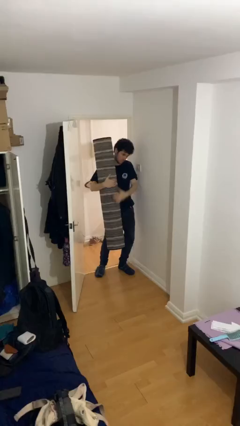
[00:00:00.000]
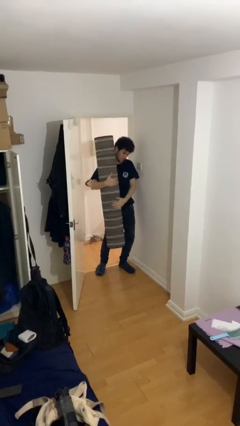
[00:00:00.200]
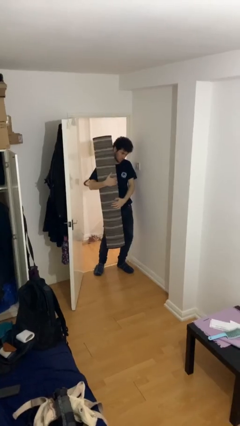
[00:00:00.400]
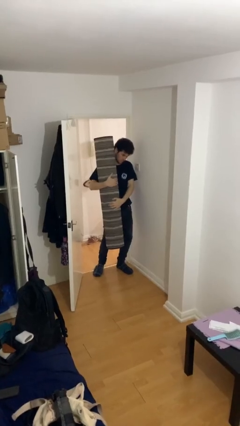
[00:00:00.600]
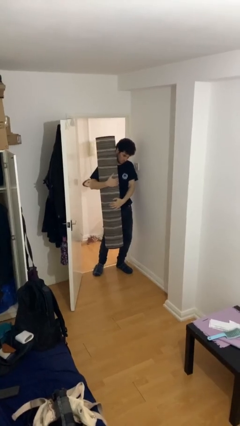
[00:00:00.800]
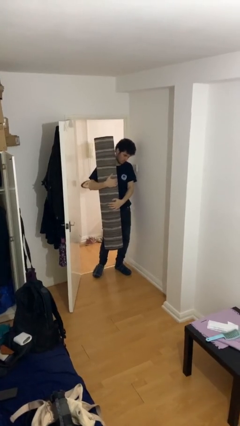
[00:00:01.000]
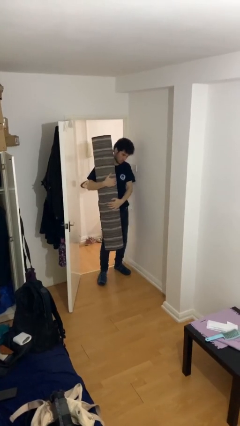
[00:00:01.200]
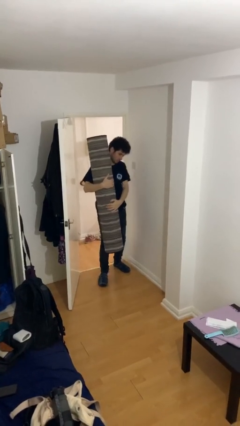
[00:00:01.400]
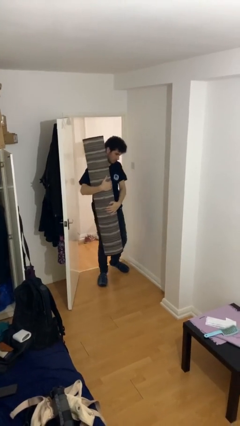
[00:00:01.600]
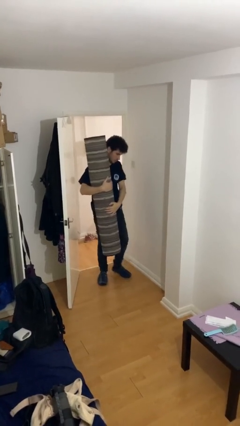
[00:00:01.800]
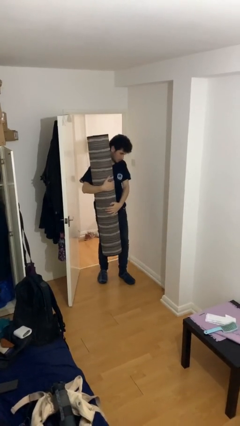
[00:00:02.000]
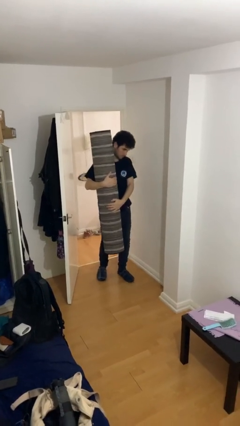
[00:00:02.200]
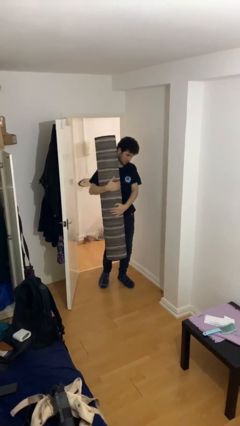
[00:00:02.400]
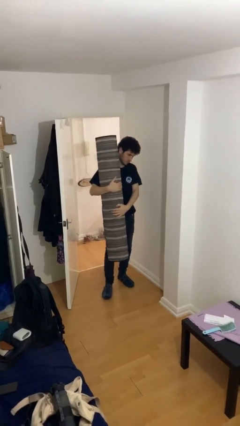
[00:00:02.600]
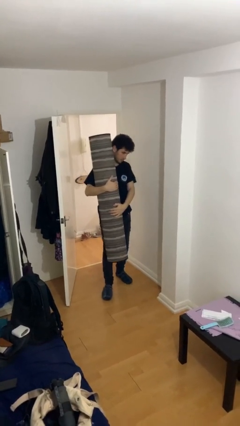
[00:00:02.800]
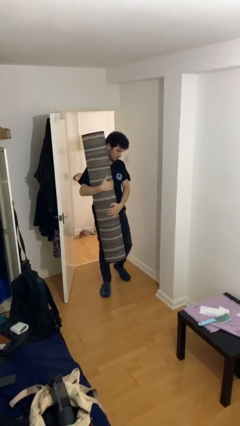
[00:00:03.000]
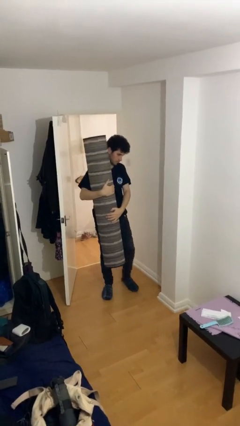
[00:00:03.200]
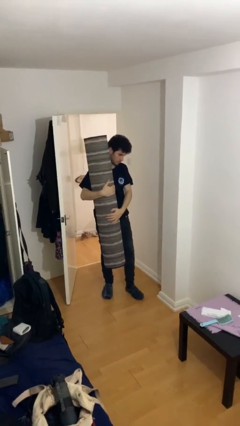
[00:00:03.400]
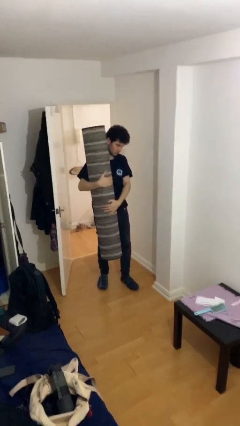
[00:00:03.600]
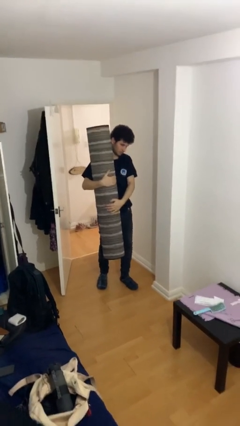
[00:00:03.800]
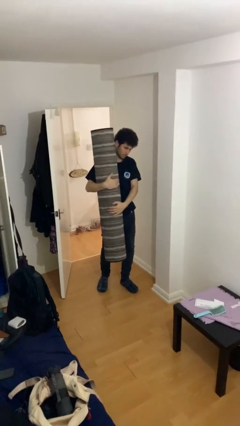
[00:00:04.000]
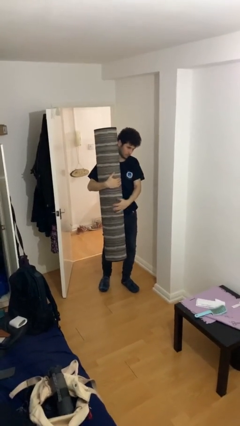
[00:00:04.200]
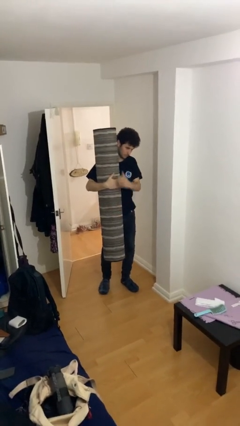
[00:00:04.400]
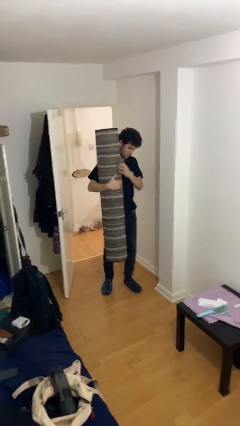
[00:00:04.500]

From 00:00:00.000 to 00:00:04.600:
person carries heavy object

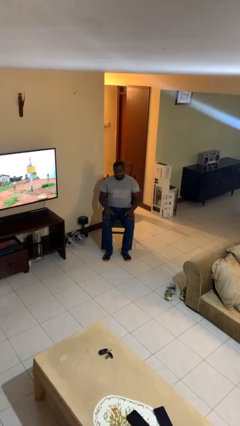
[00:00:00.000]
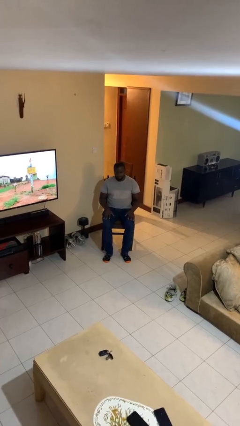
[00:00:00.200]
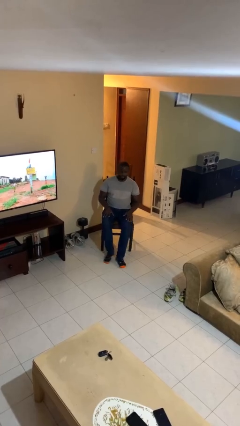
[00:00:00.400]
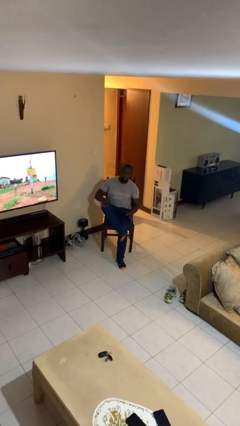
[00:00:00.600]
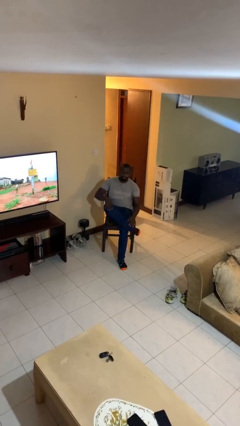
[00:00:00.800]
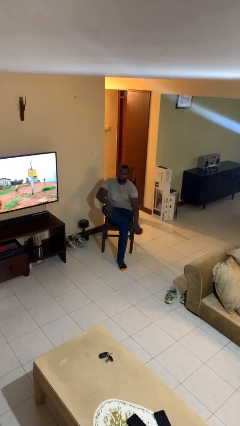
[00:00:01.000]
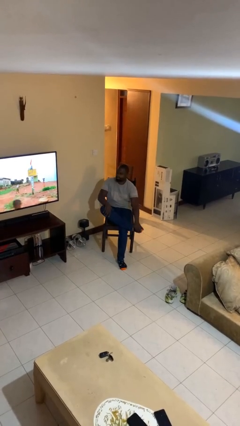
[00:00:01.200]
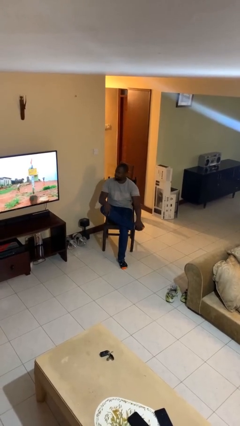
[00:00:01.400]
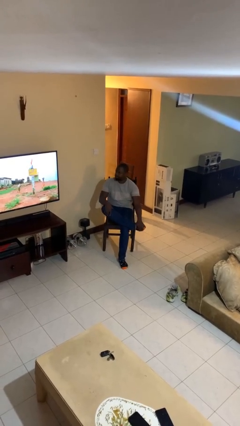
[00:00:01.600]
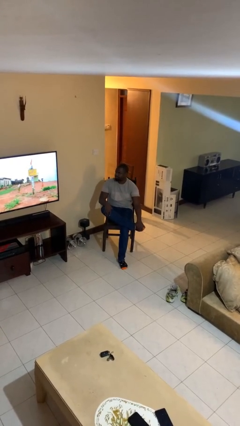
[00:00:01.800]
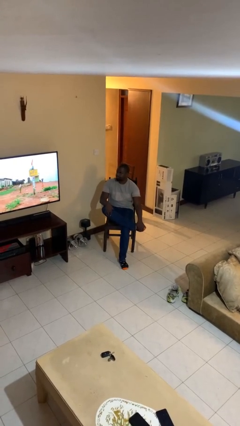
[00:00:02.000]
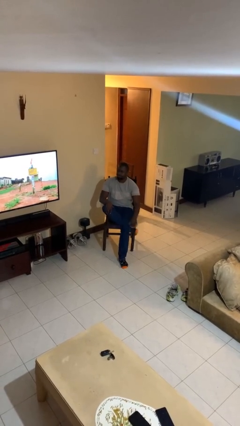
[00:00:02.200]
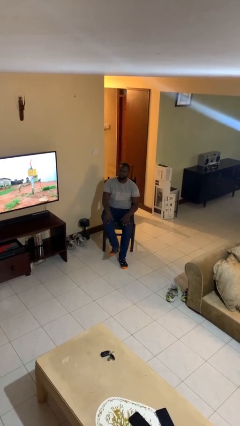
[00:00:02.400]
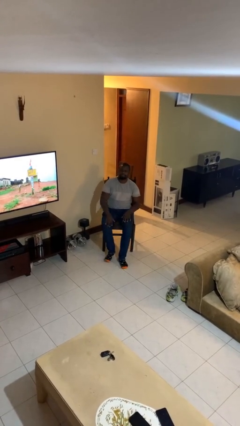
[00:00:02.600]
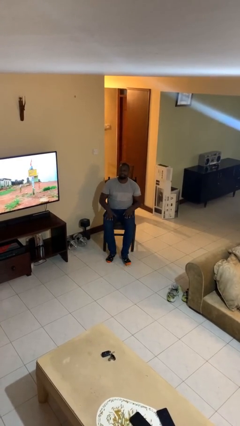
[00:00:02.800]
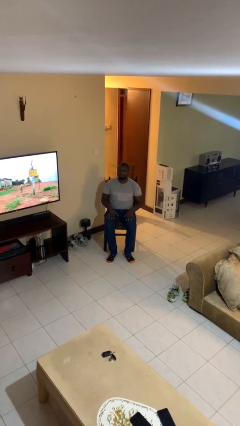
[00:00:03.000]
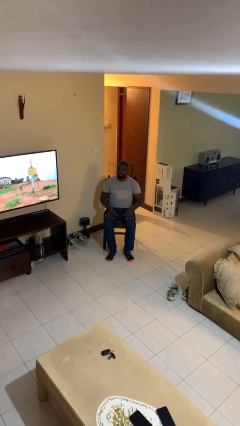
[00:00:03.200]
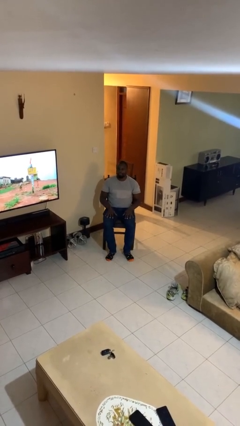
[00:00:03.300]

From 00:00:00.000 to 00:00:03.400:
person crosses legs

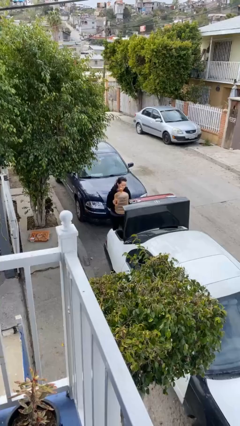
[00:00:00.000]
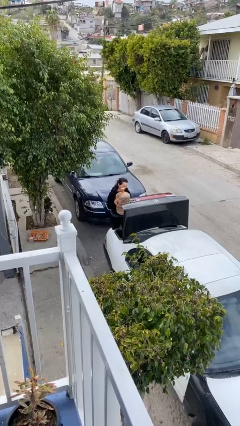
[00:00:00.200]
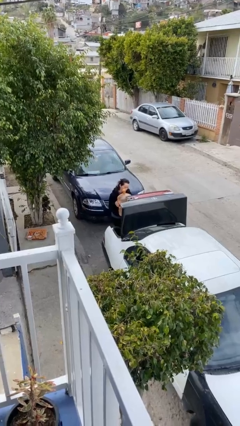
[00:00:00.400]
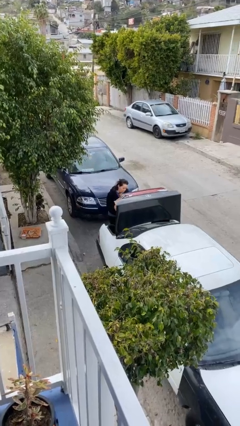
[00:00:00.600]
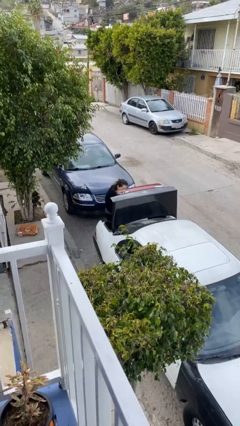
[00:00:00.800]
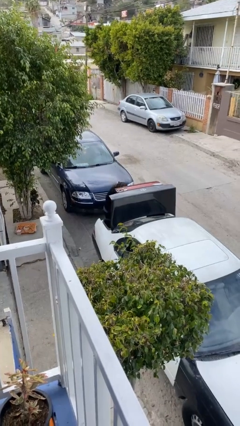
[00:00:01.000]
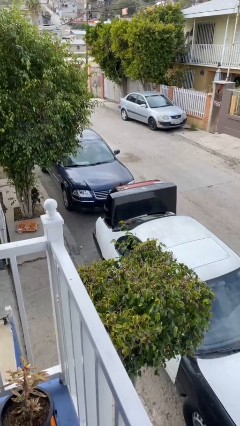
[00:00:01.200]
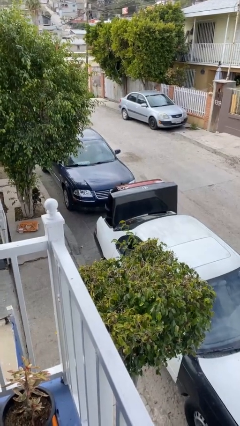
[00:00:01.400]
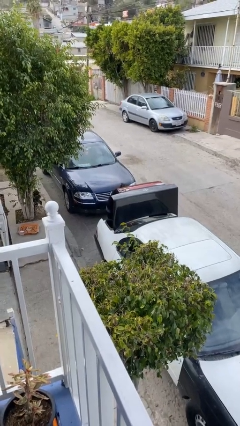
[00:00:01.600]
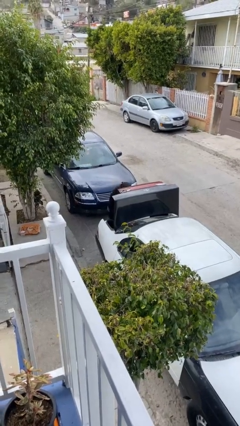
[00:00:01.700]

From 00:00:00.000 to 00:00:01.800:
person loads car

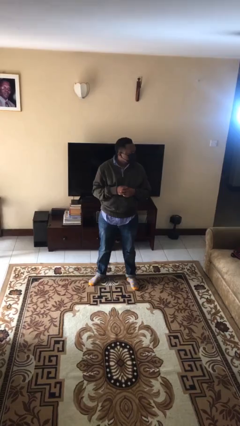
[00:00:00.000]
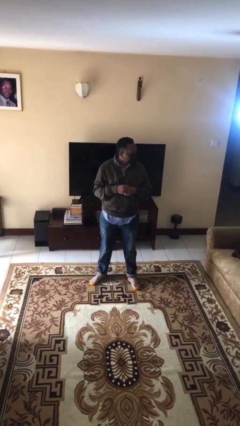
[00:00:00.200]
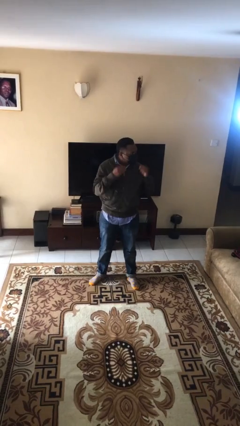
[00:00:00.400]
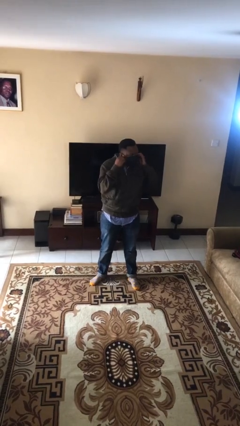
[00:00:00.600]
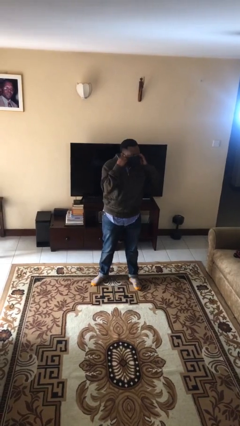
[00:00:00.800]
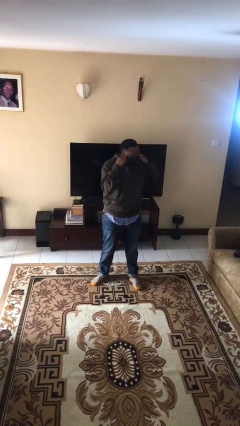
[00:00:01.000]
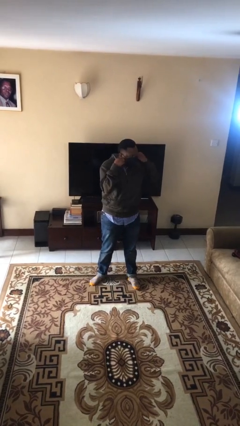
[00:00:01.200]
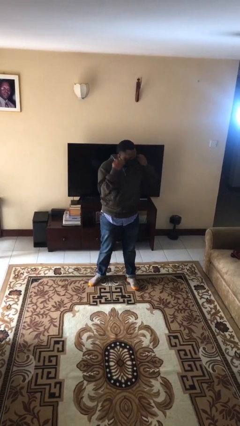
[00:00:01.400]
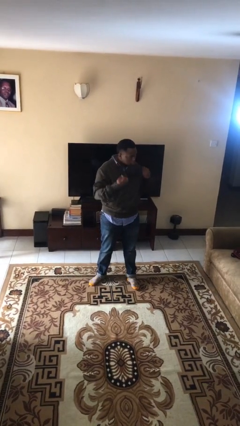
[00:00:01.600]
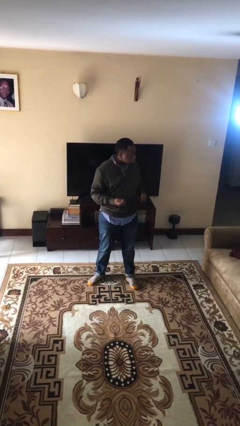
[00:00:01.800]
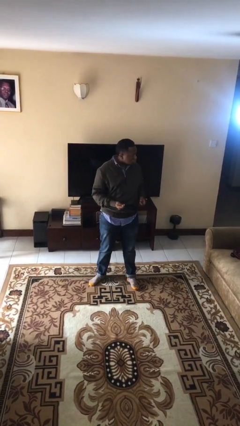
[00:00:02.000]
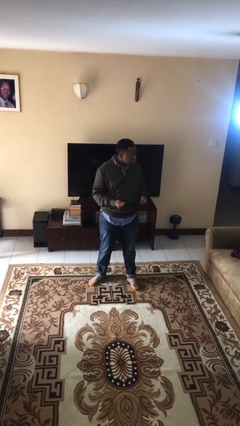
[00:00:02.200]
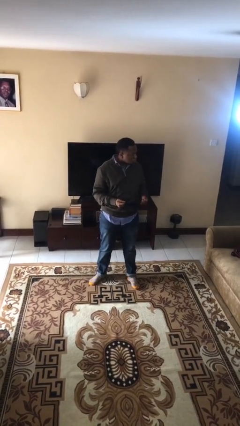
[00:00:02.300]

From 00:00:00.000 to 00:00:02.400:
person takes off facemask

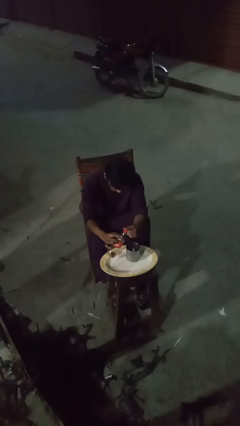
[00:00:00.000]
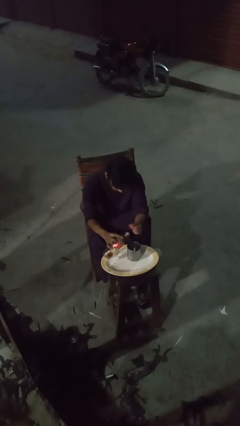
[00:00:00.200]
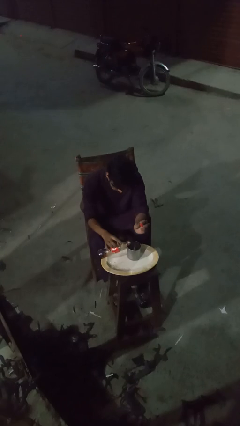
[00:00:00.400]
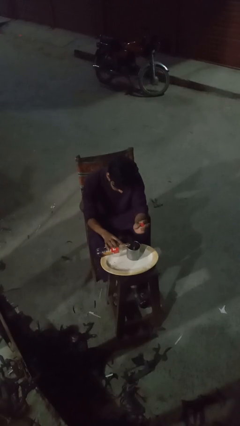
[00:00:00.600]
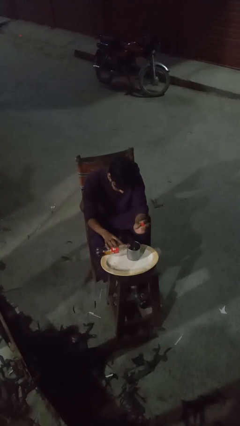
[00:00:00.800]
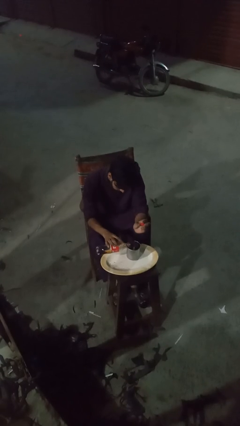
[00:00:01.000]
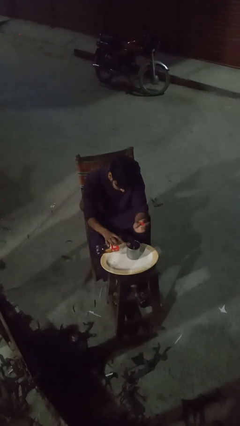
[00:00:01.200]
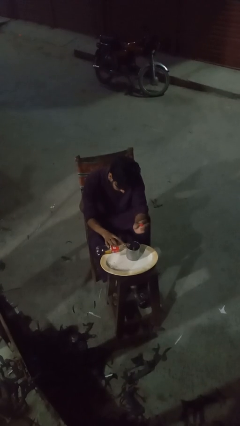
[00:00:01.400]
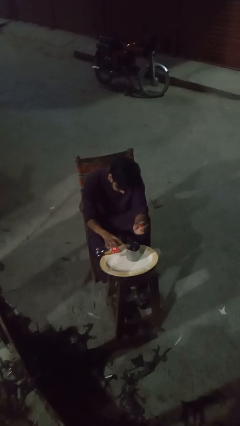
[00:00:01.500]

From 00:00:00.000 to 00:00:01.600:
person pours liquid into cup

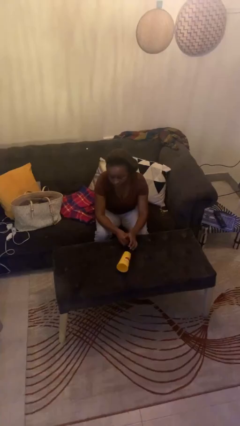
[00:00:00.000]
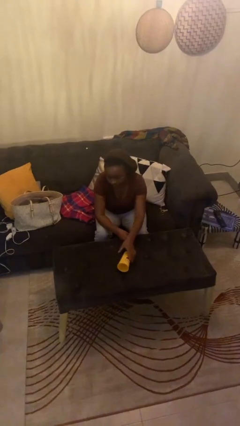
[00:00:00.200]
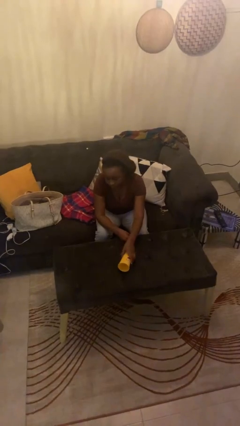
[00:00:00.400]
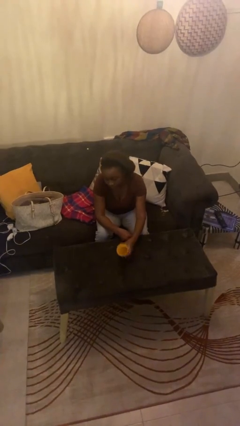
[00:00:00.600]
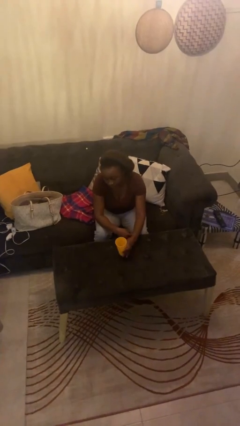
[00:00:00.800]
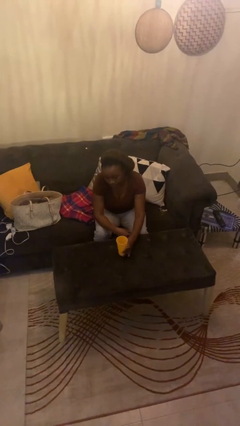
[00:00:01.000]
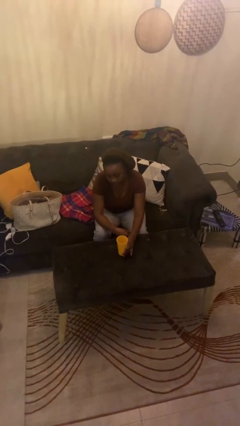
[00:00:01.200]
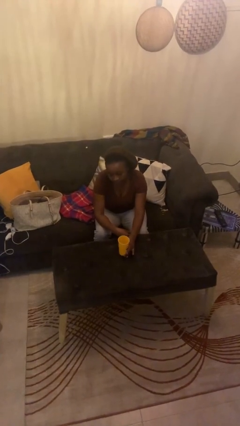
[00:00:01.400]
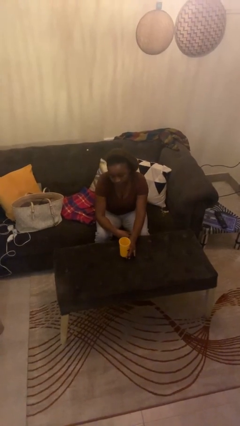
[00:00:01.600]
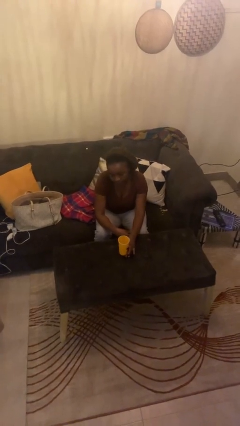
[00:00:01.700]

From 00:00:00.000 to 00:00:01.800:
person sets upright glass

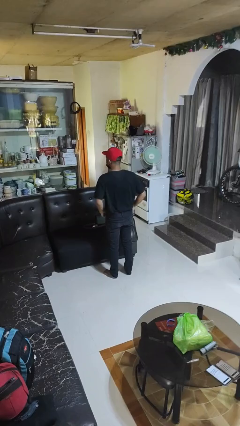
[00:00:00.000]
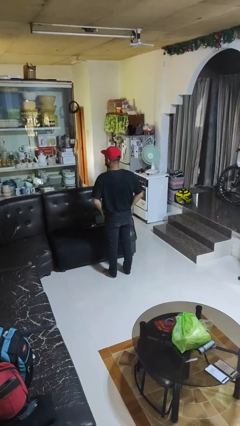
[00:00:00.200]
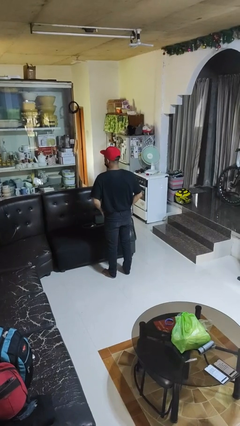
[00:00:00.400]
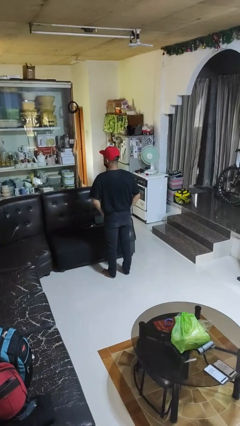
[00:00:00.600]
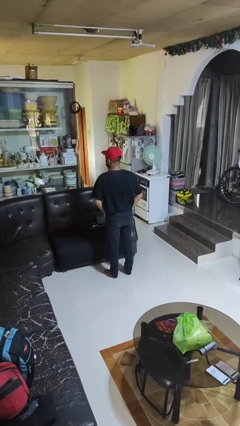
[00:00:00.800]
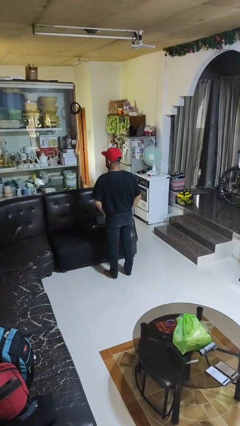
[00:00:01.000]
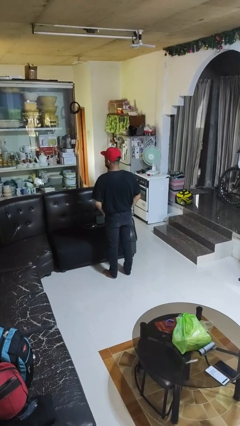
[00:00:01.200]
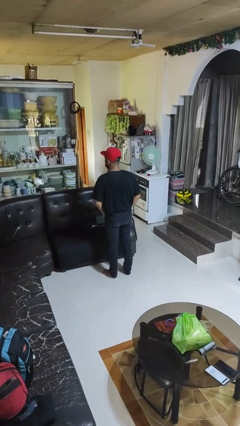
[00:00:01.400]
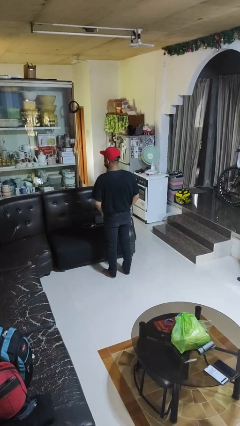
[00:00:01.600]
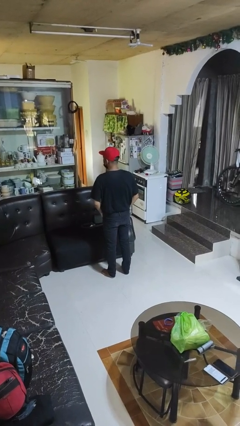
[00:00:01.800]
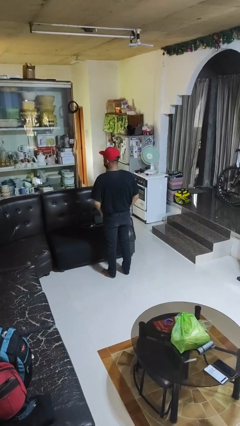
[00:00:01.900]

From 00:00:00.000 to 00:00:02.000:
person puts hands in back pockets
